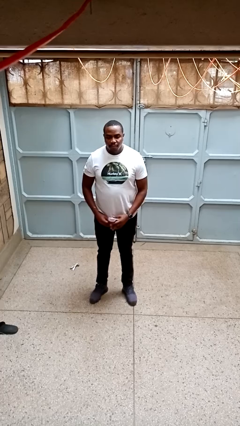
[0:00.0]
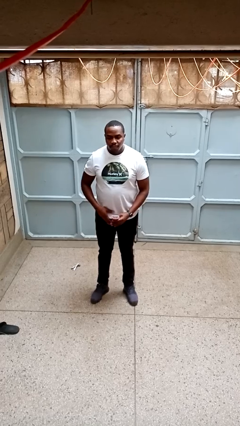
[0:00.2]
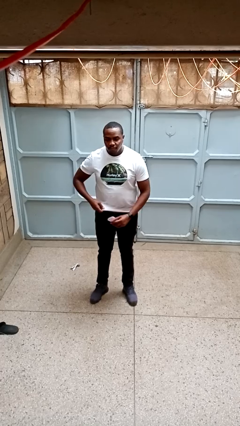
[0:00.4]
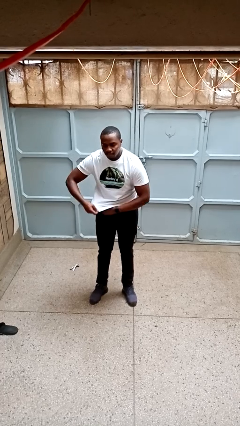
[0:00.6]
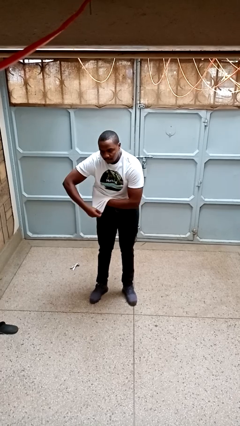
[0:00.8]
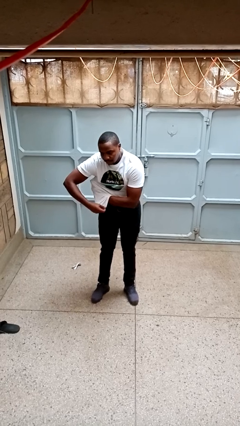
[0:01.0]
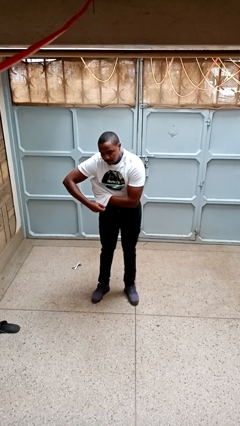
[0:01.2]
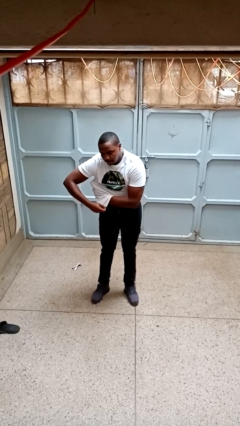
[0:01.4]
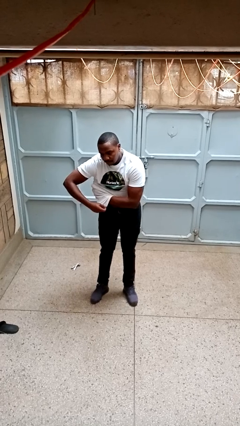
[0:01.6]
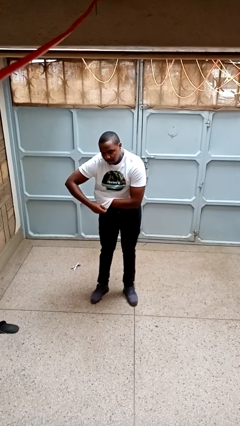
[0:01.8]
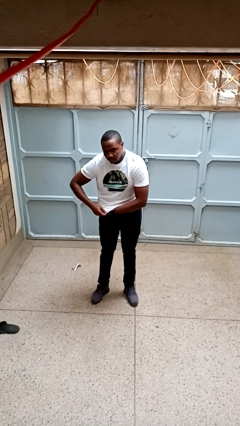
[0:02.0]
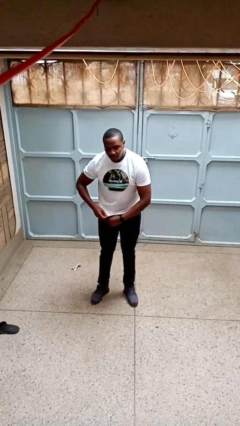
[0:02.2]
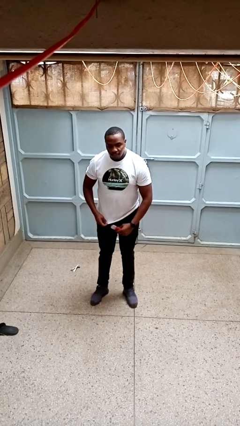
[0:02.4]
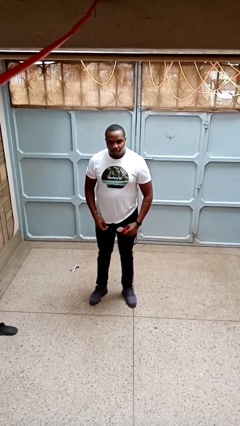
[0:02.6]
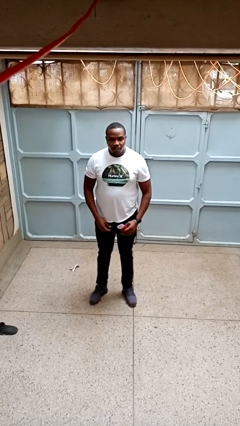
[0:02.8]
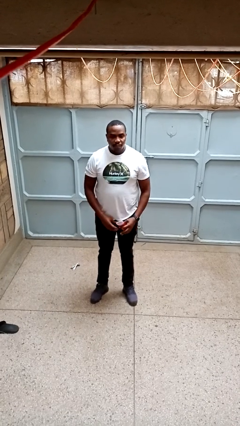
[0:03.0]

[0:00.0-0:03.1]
person applies deodorant

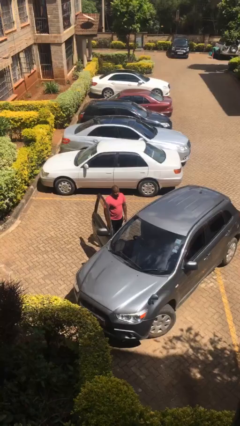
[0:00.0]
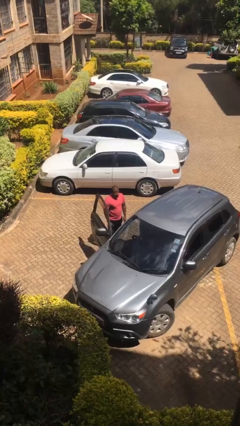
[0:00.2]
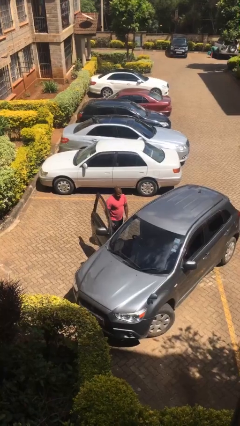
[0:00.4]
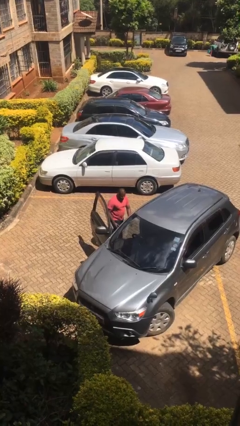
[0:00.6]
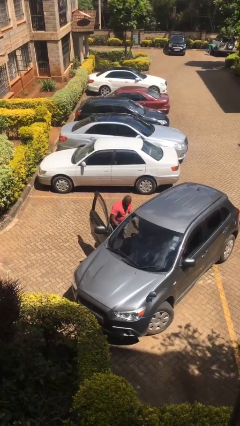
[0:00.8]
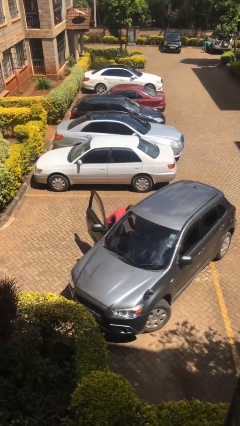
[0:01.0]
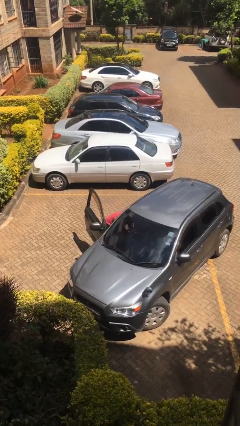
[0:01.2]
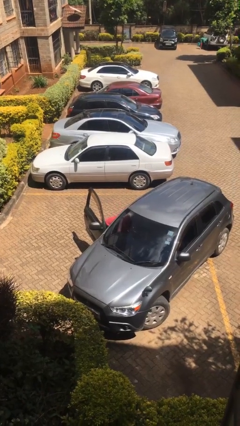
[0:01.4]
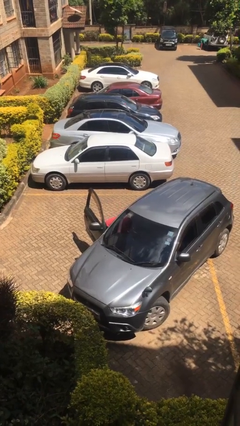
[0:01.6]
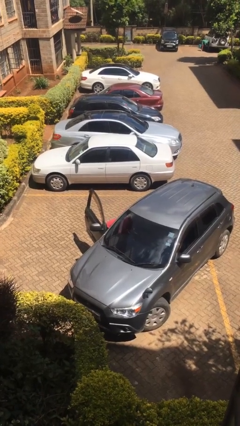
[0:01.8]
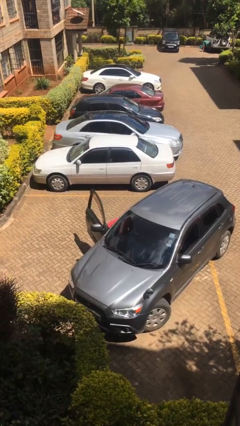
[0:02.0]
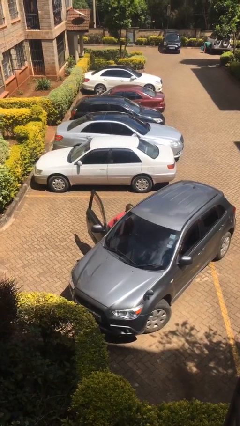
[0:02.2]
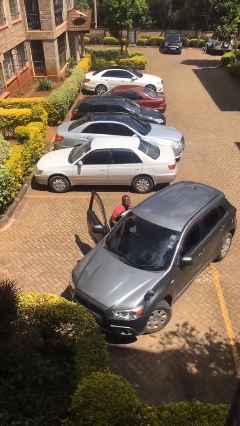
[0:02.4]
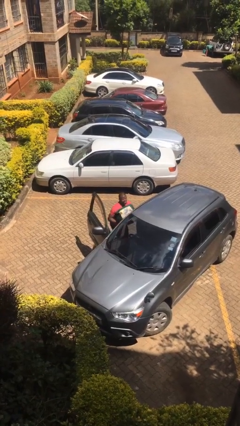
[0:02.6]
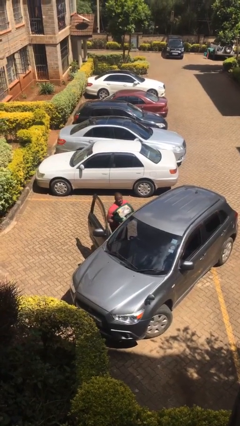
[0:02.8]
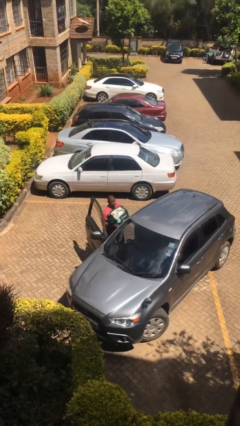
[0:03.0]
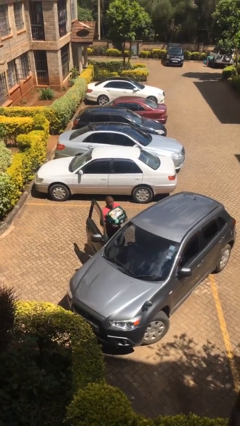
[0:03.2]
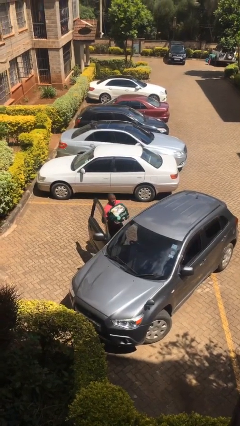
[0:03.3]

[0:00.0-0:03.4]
person unloads car

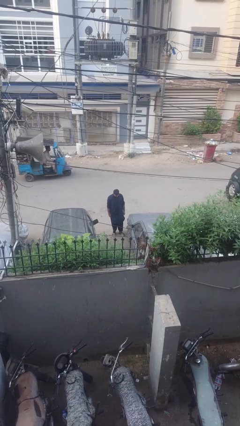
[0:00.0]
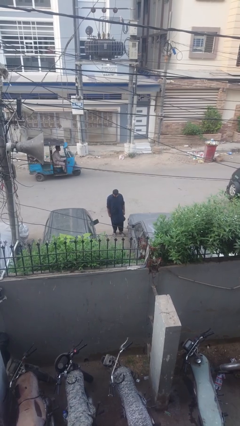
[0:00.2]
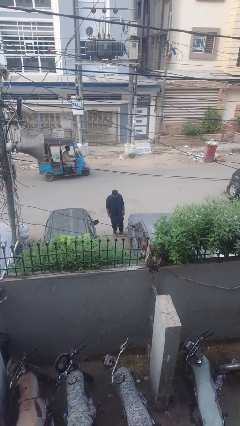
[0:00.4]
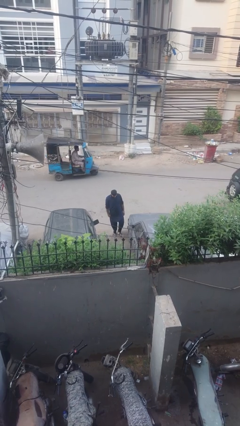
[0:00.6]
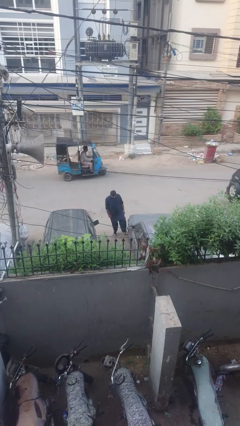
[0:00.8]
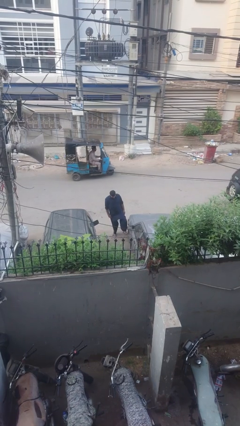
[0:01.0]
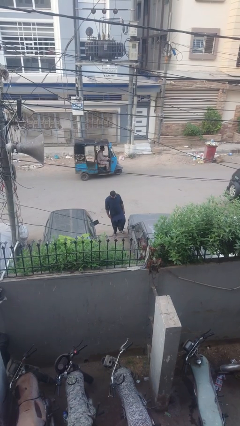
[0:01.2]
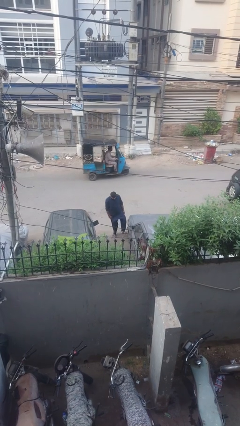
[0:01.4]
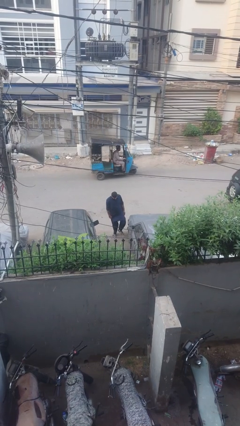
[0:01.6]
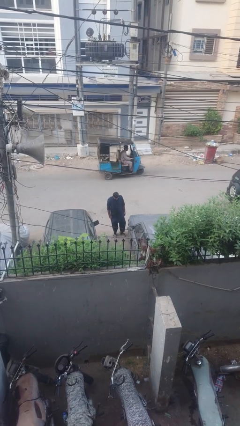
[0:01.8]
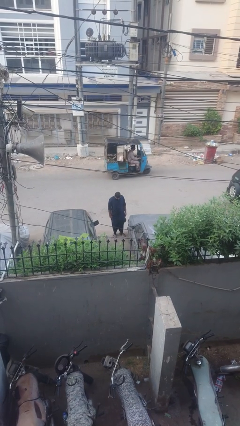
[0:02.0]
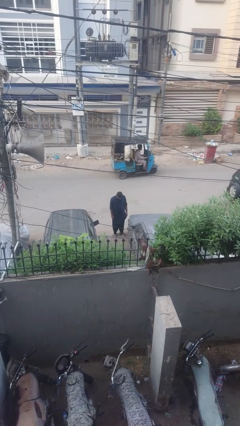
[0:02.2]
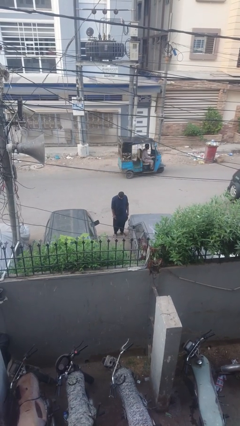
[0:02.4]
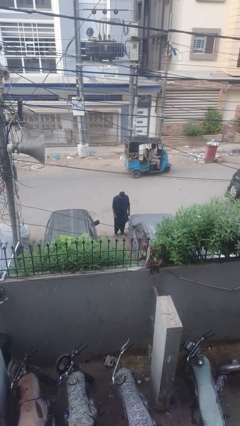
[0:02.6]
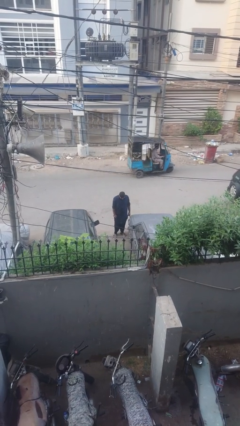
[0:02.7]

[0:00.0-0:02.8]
person kicks car tires

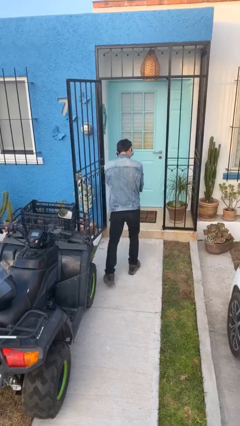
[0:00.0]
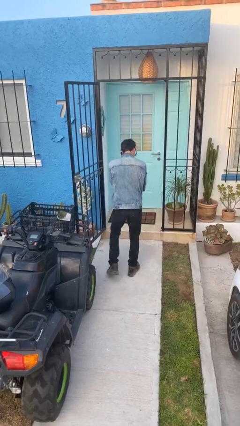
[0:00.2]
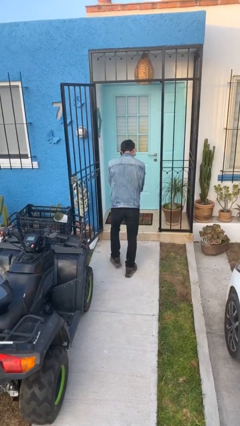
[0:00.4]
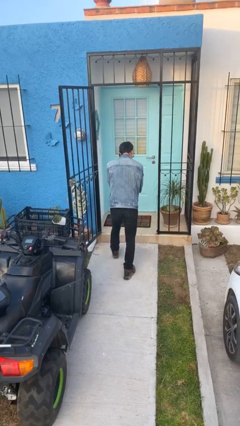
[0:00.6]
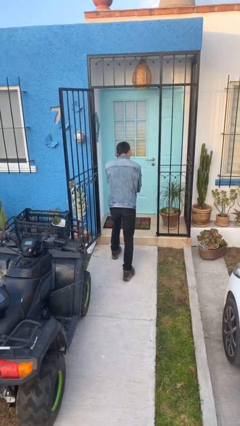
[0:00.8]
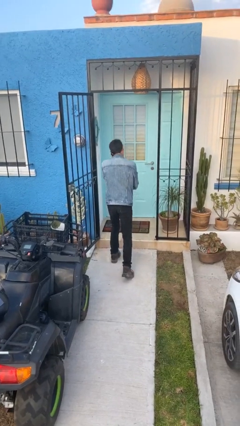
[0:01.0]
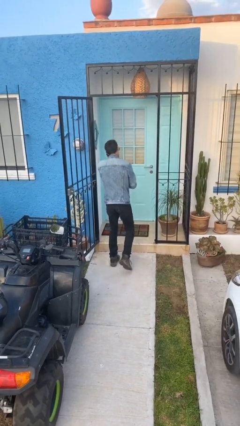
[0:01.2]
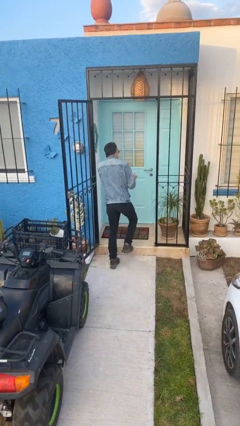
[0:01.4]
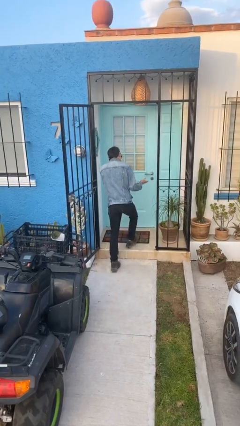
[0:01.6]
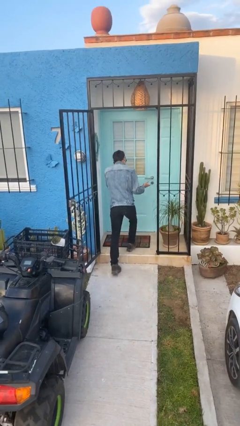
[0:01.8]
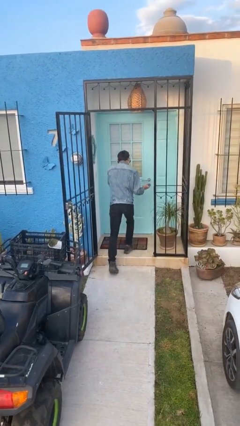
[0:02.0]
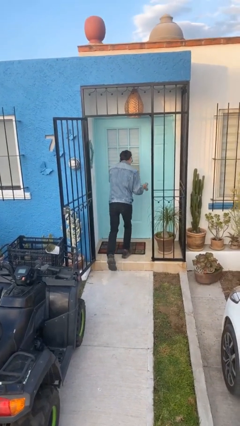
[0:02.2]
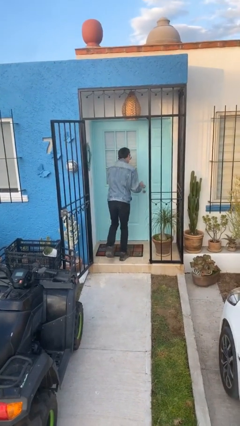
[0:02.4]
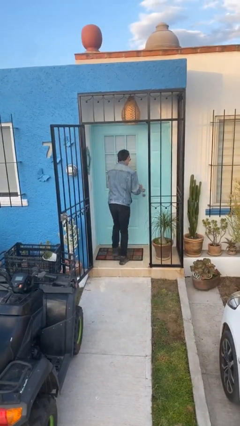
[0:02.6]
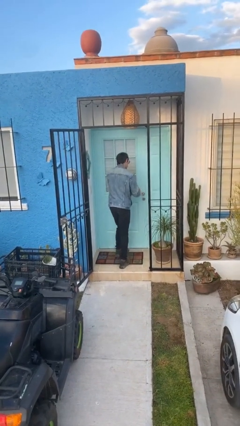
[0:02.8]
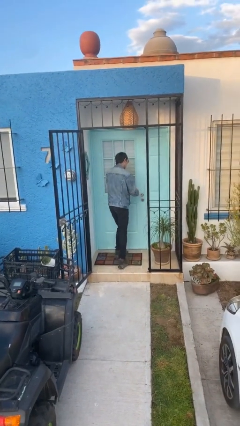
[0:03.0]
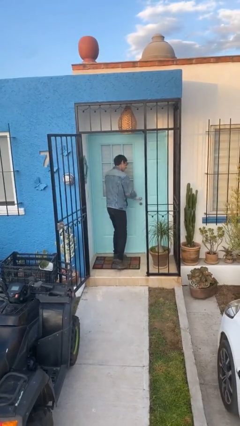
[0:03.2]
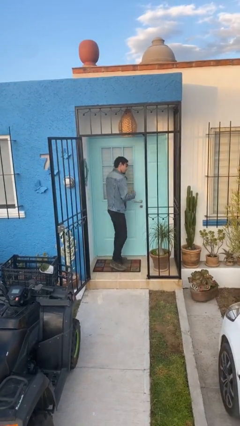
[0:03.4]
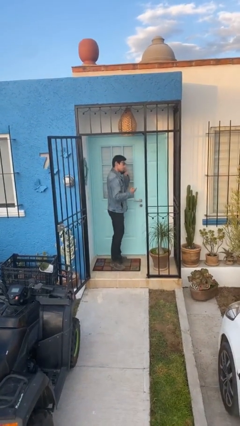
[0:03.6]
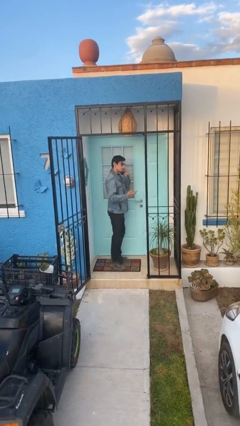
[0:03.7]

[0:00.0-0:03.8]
person exits scene through structure

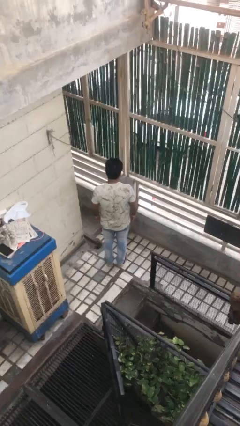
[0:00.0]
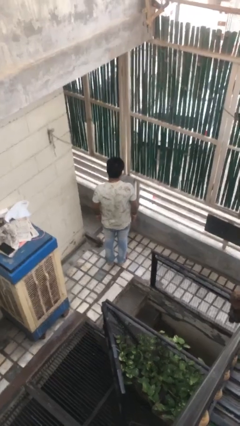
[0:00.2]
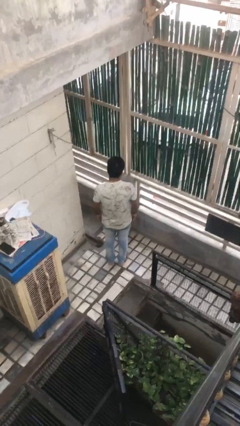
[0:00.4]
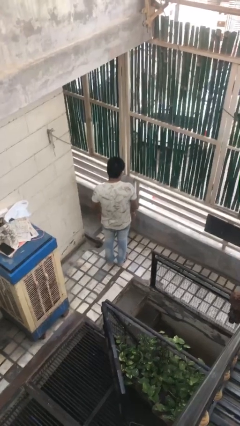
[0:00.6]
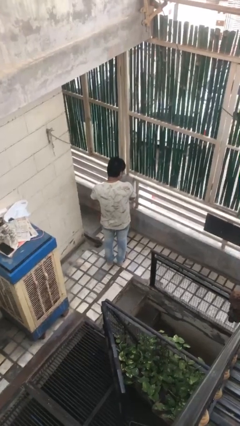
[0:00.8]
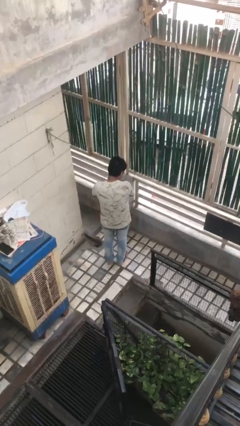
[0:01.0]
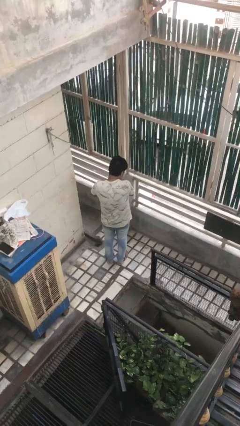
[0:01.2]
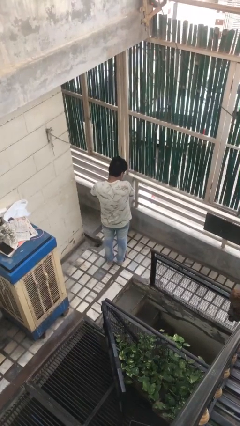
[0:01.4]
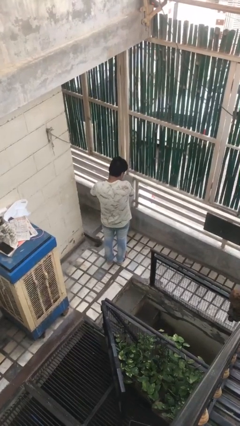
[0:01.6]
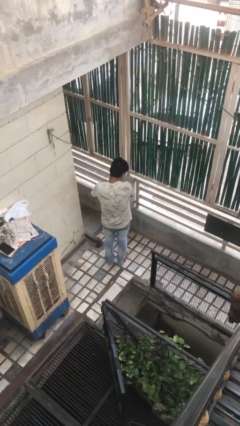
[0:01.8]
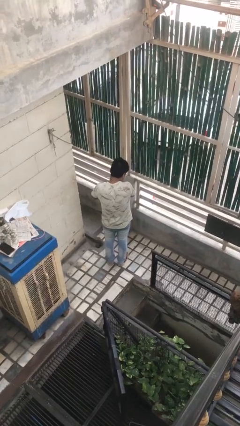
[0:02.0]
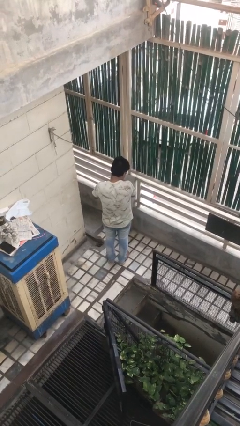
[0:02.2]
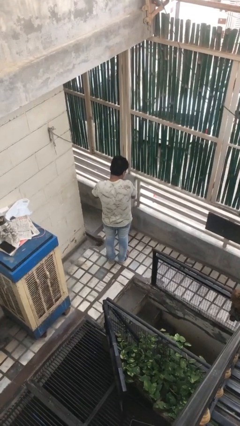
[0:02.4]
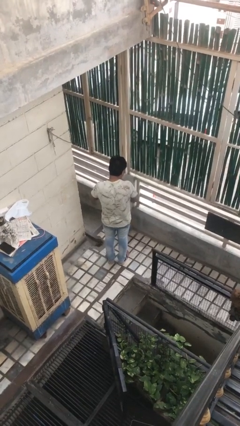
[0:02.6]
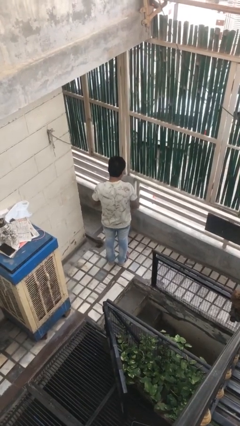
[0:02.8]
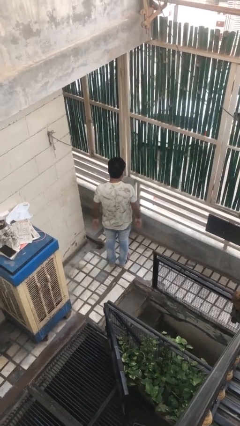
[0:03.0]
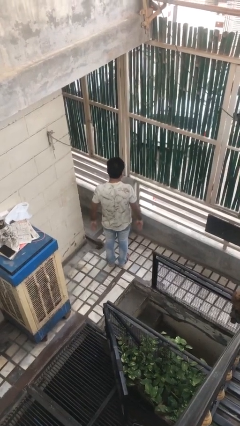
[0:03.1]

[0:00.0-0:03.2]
person swats bug

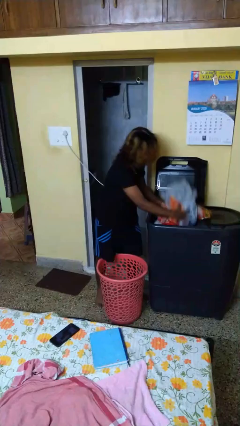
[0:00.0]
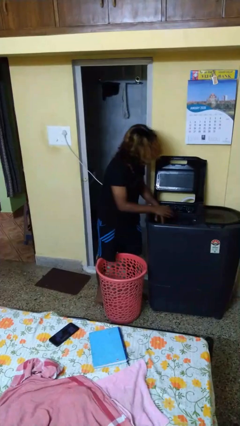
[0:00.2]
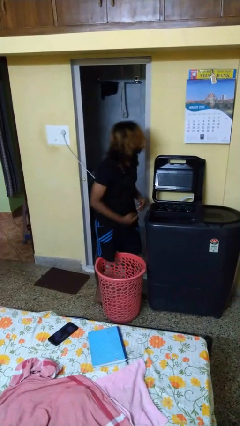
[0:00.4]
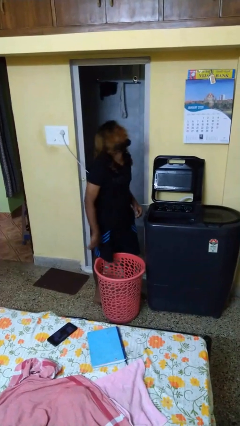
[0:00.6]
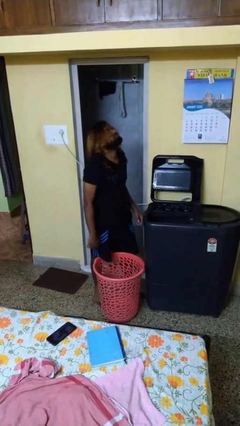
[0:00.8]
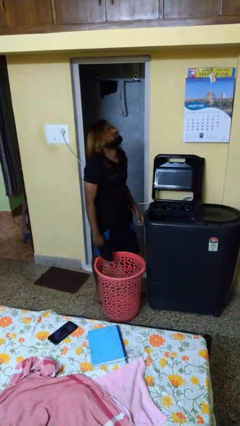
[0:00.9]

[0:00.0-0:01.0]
person loads clotheswasher

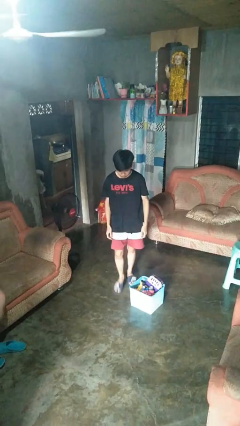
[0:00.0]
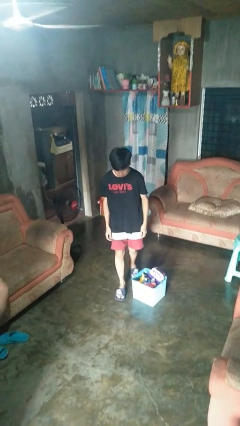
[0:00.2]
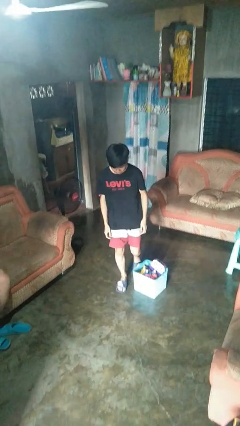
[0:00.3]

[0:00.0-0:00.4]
person trips on object on floor
